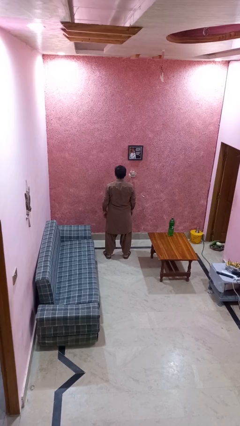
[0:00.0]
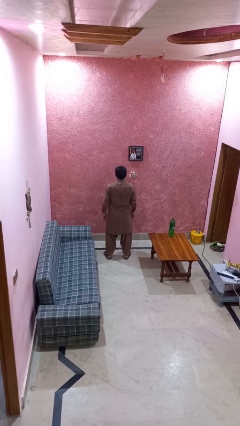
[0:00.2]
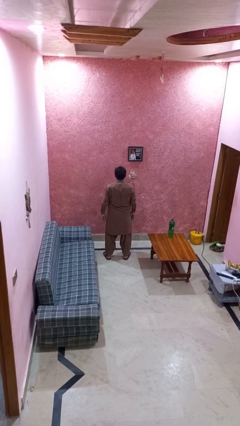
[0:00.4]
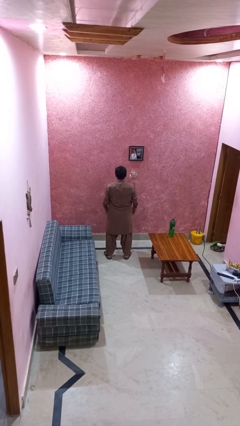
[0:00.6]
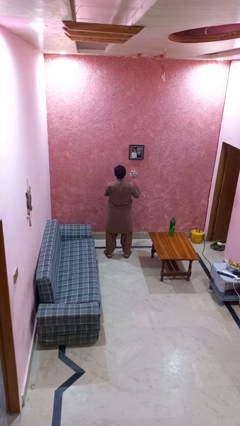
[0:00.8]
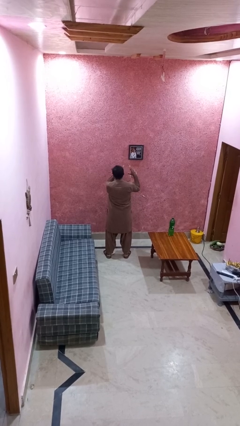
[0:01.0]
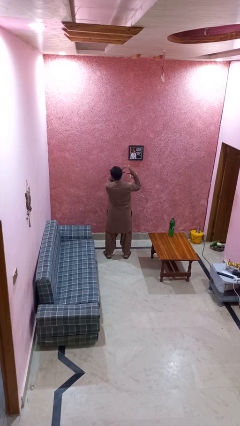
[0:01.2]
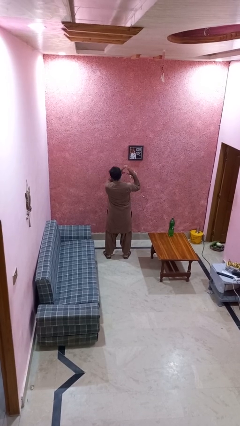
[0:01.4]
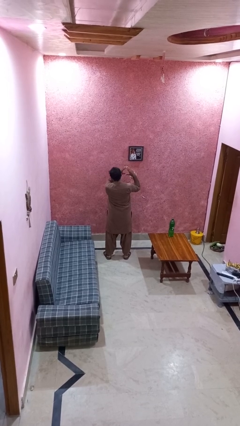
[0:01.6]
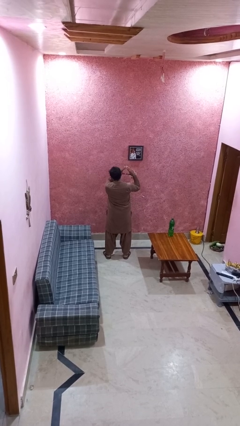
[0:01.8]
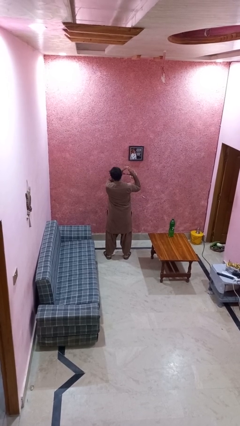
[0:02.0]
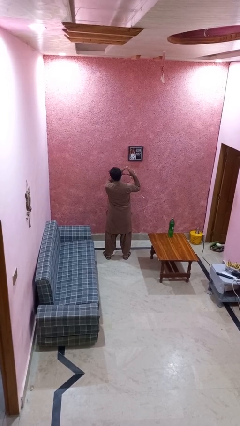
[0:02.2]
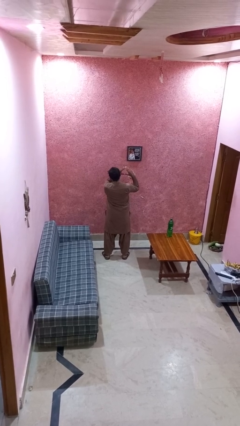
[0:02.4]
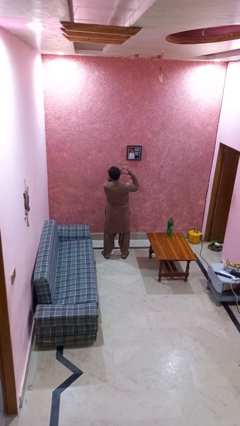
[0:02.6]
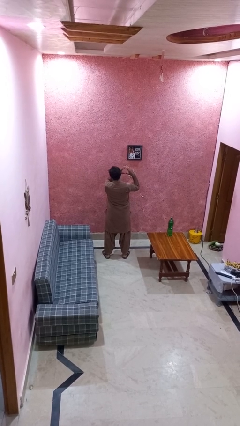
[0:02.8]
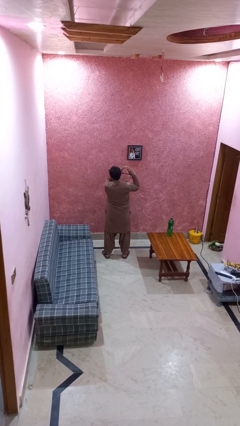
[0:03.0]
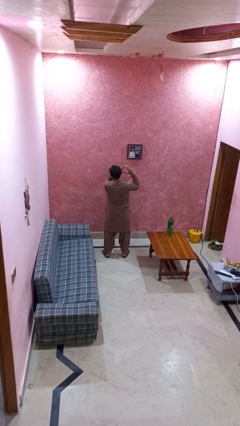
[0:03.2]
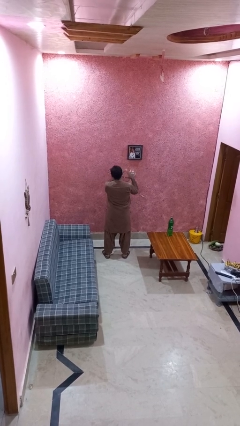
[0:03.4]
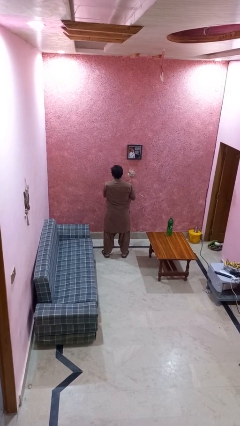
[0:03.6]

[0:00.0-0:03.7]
person gestures heart

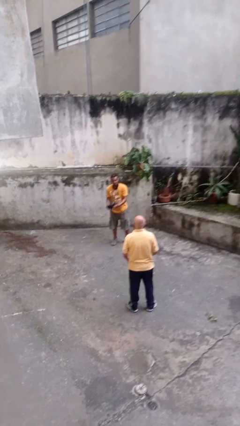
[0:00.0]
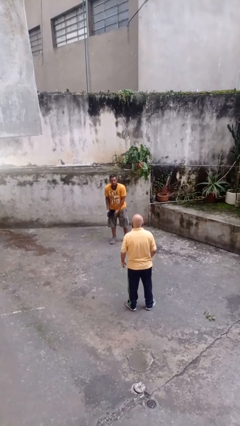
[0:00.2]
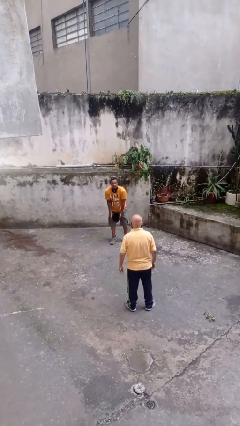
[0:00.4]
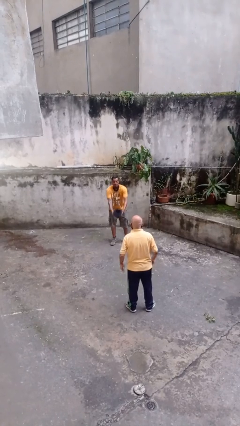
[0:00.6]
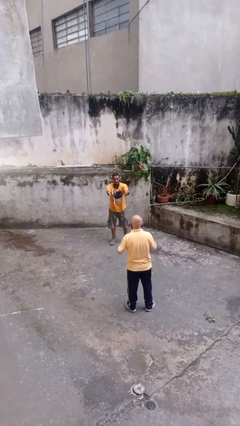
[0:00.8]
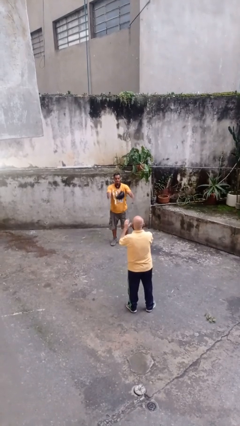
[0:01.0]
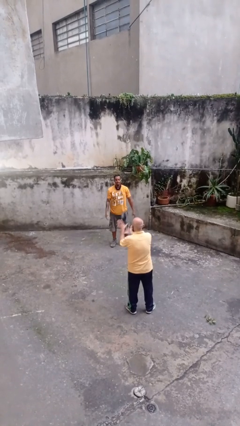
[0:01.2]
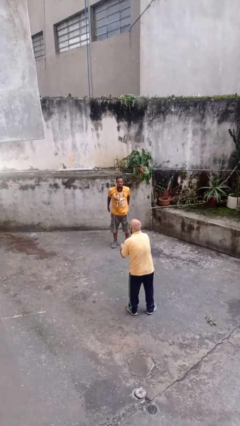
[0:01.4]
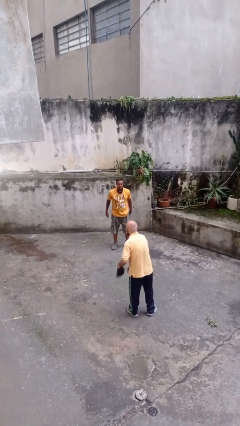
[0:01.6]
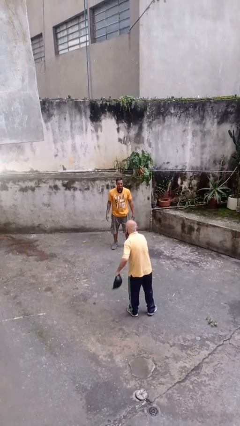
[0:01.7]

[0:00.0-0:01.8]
person throws object to person

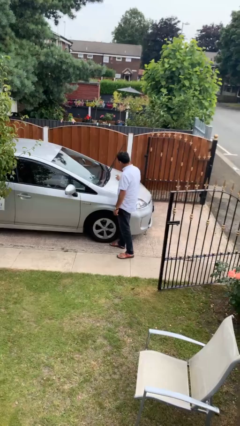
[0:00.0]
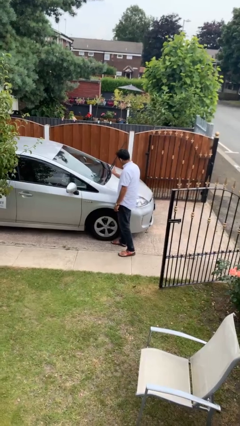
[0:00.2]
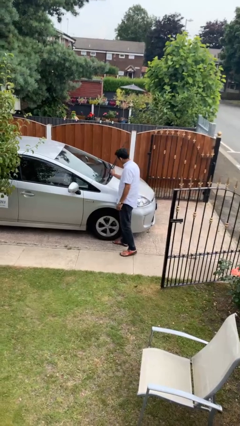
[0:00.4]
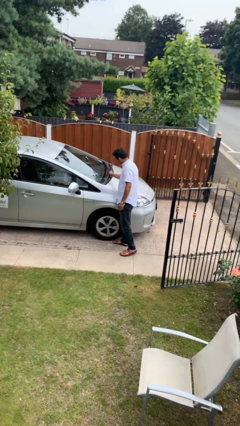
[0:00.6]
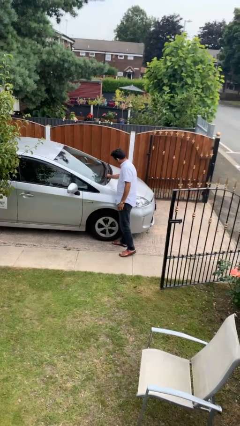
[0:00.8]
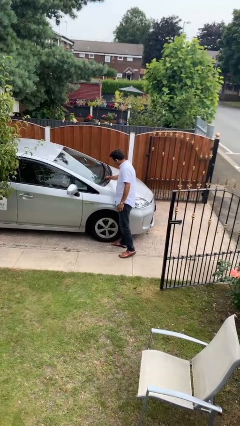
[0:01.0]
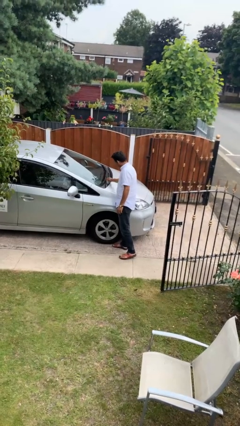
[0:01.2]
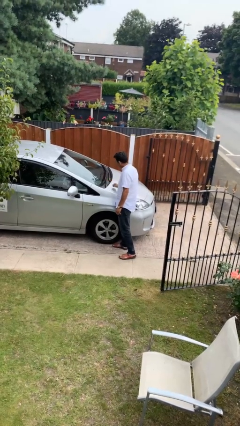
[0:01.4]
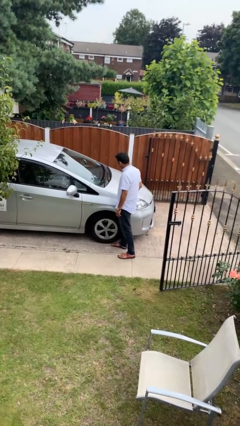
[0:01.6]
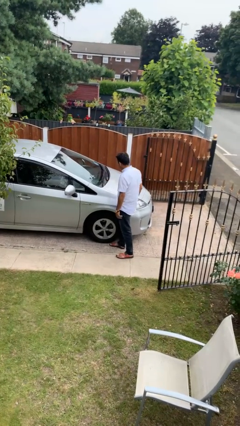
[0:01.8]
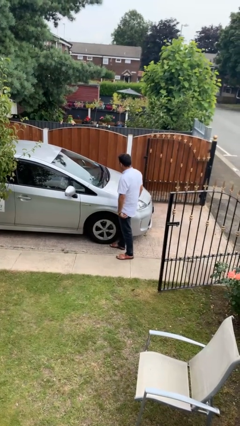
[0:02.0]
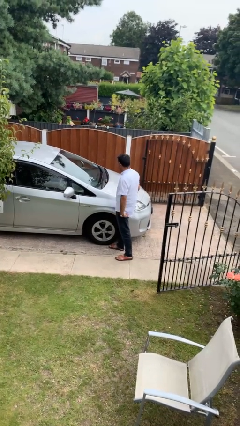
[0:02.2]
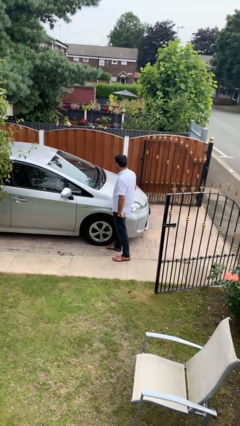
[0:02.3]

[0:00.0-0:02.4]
person flips down car wipers

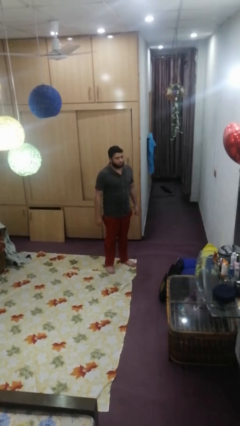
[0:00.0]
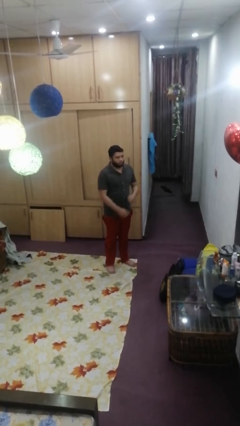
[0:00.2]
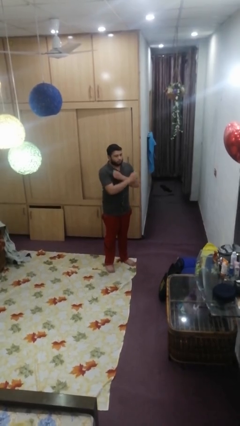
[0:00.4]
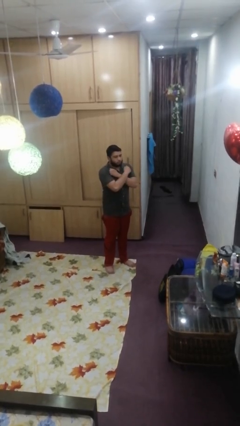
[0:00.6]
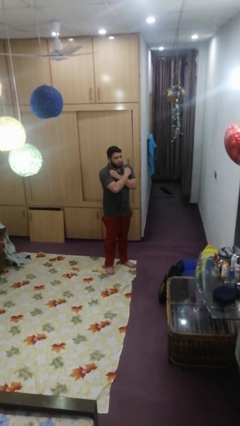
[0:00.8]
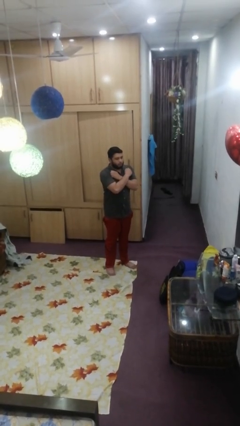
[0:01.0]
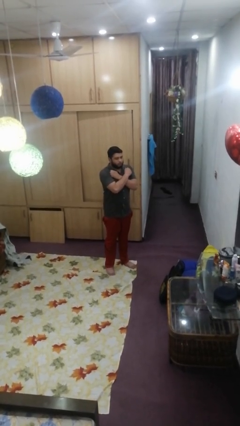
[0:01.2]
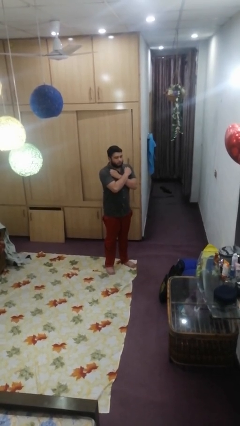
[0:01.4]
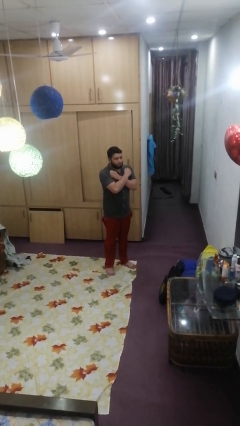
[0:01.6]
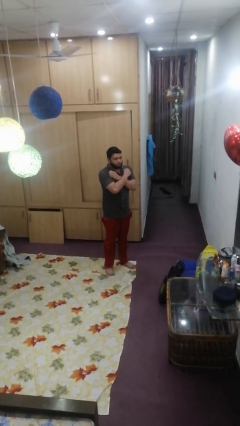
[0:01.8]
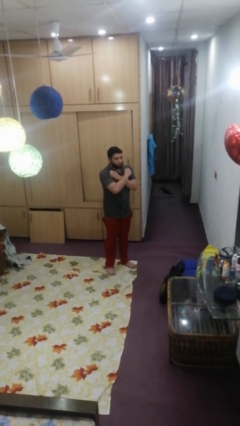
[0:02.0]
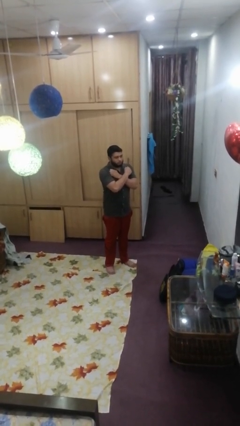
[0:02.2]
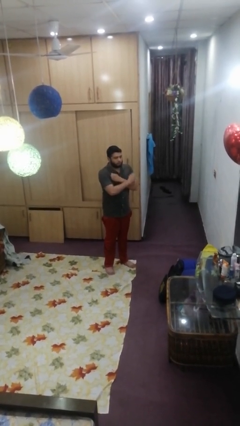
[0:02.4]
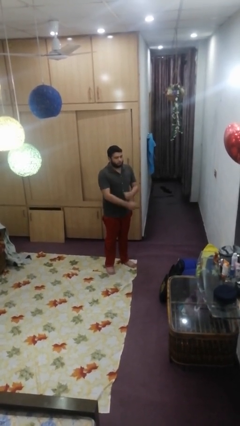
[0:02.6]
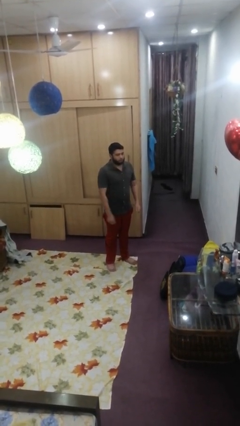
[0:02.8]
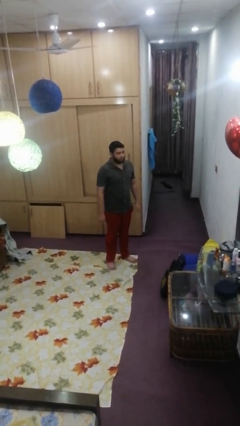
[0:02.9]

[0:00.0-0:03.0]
person crosses arms

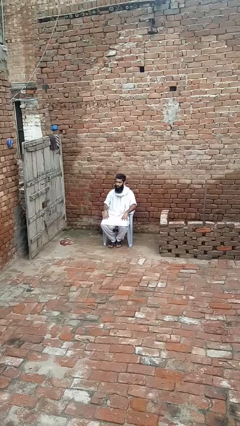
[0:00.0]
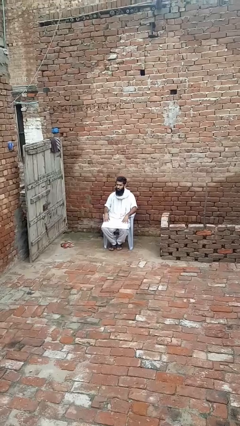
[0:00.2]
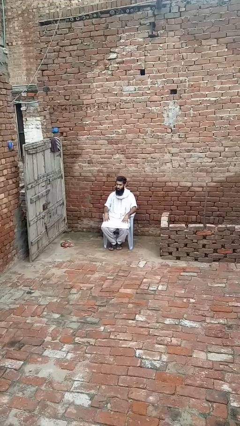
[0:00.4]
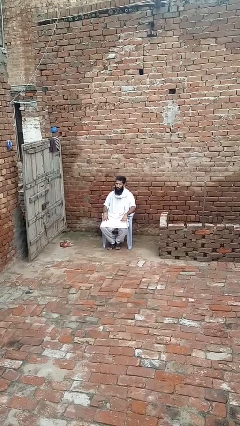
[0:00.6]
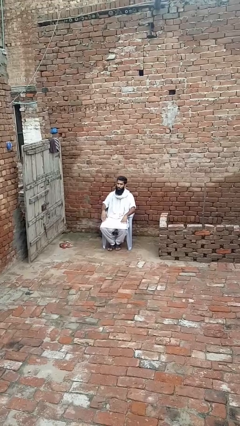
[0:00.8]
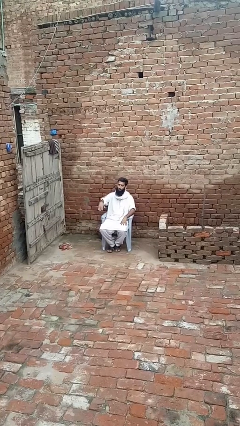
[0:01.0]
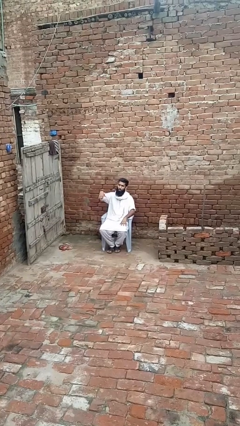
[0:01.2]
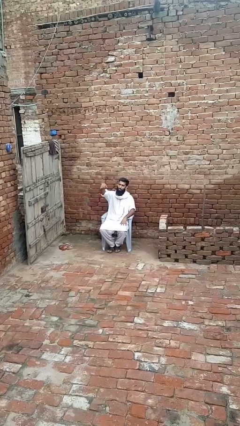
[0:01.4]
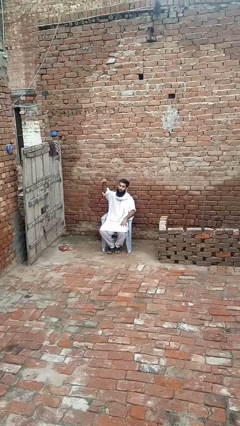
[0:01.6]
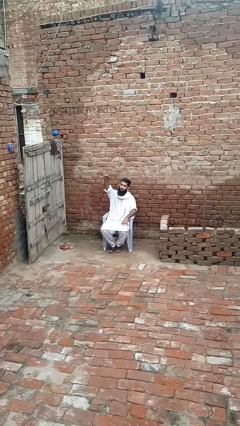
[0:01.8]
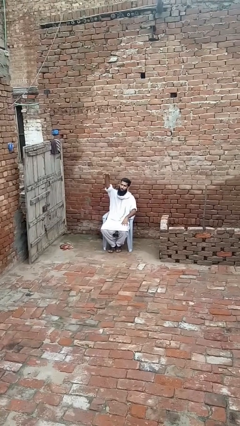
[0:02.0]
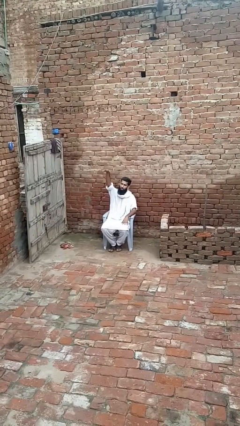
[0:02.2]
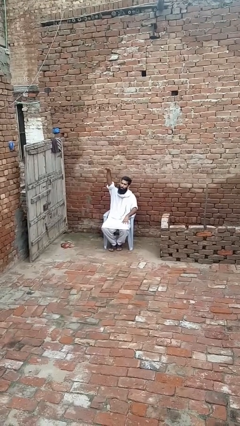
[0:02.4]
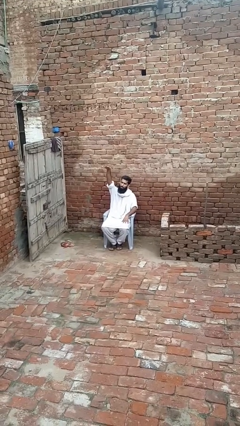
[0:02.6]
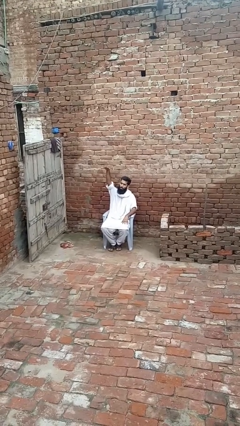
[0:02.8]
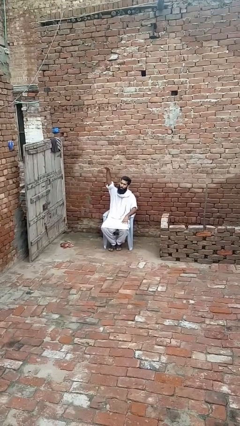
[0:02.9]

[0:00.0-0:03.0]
person gestures swipe up

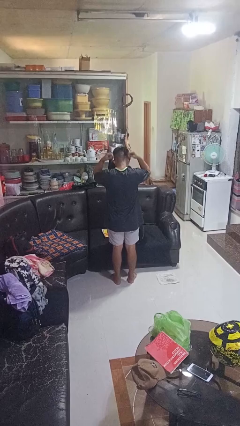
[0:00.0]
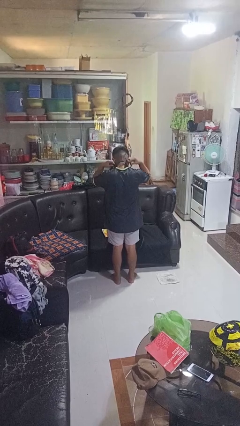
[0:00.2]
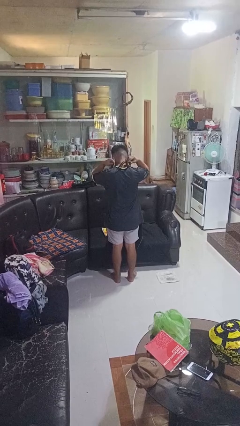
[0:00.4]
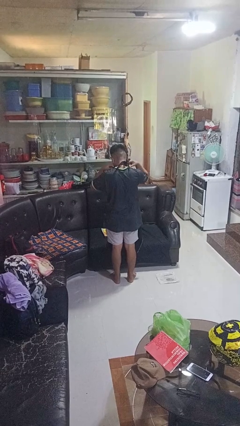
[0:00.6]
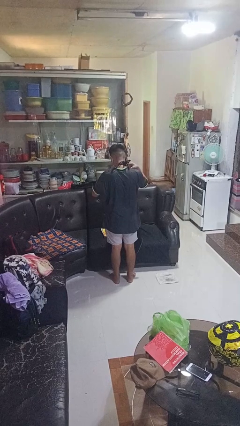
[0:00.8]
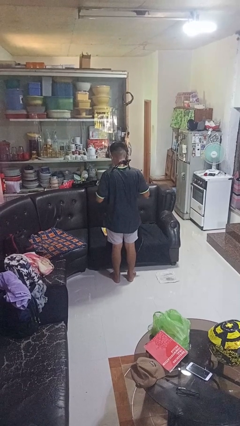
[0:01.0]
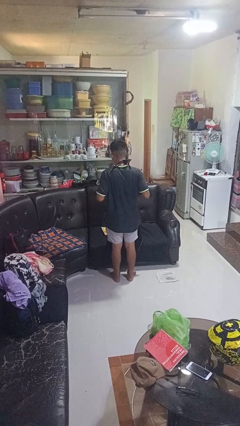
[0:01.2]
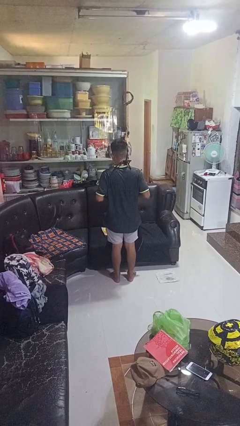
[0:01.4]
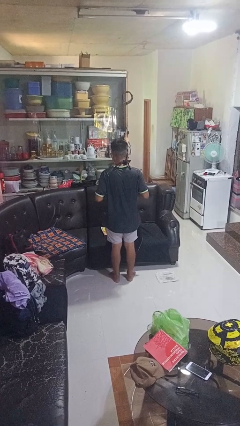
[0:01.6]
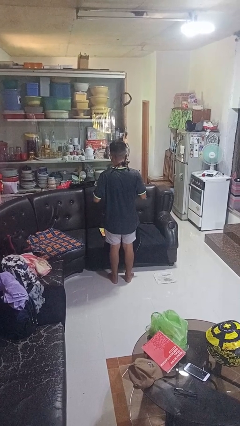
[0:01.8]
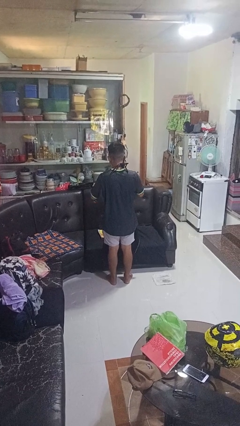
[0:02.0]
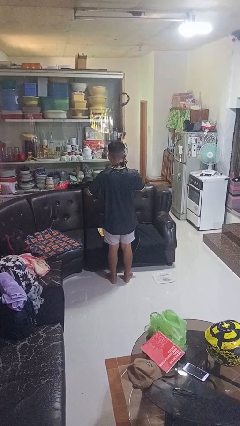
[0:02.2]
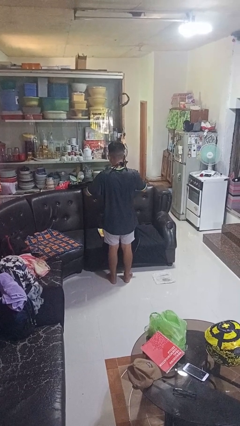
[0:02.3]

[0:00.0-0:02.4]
person puts on apron

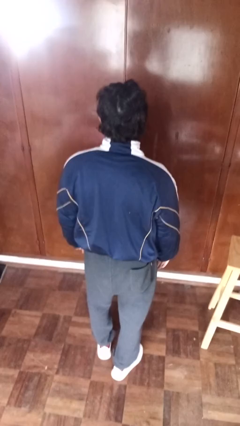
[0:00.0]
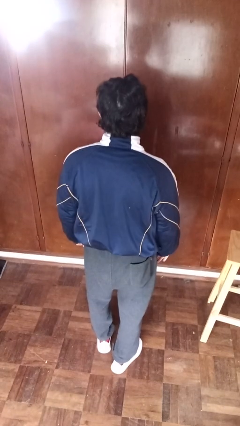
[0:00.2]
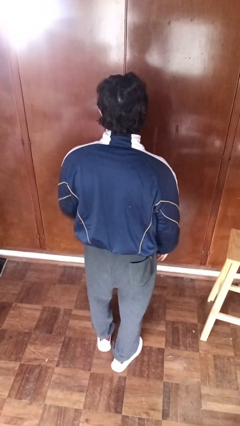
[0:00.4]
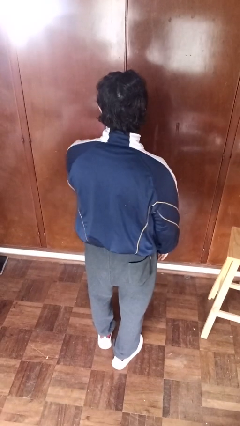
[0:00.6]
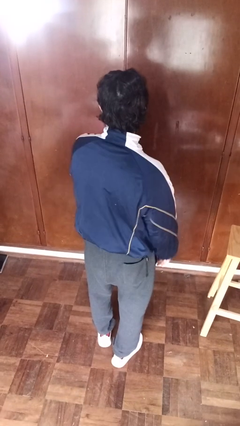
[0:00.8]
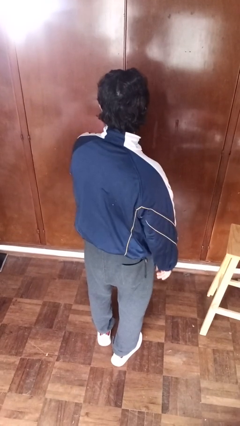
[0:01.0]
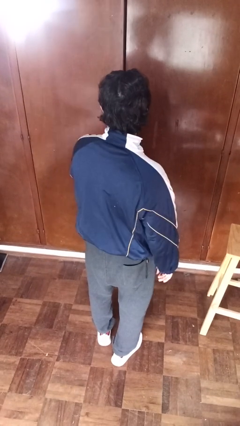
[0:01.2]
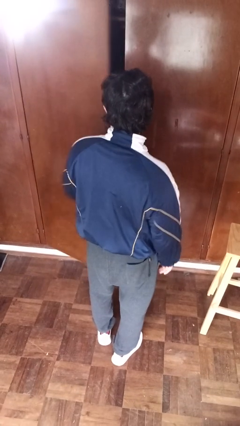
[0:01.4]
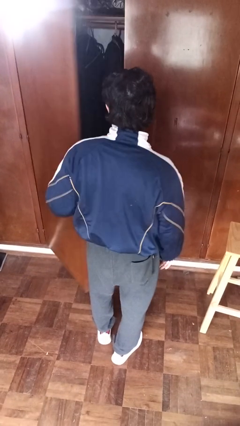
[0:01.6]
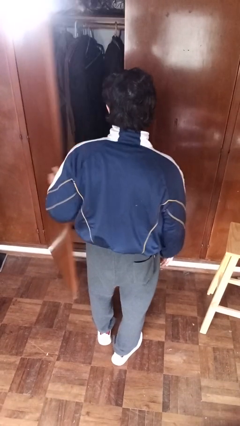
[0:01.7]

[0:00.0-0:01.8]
person opens closet door
